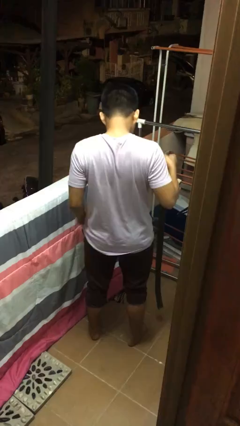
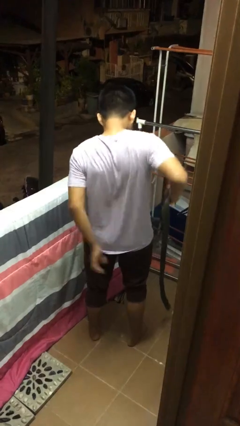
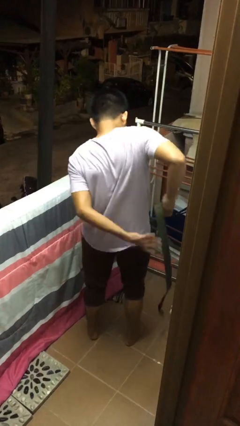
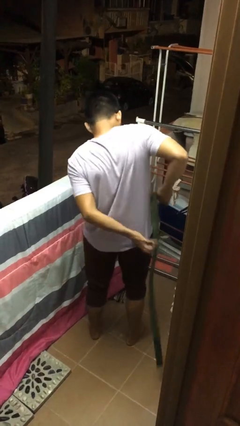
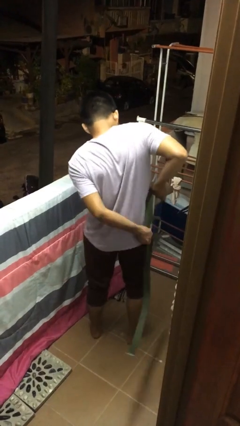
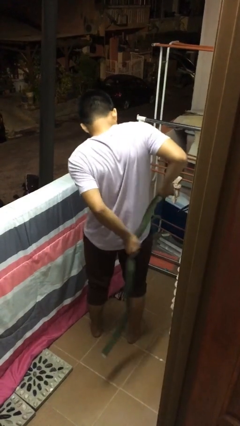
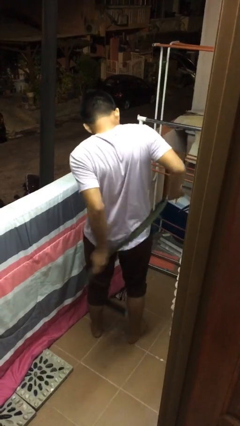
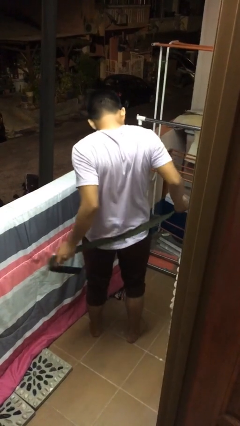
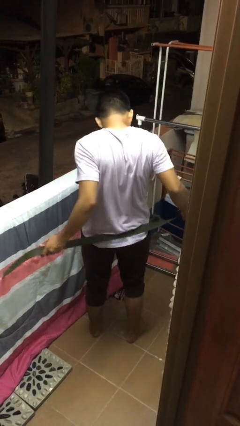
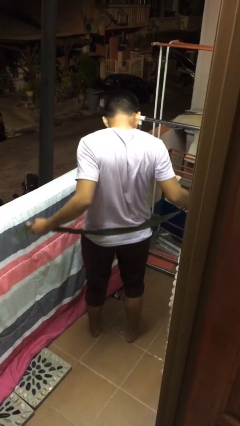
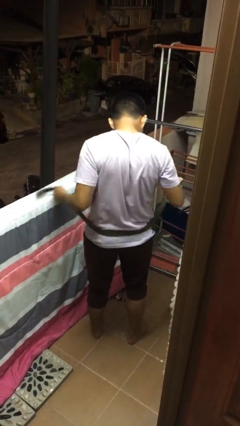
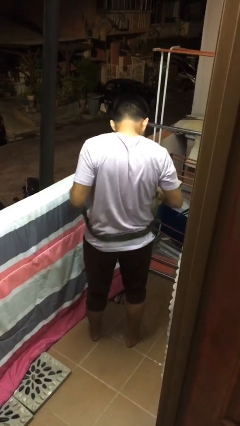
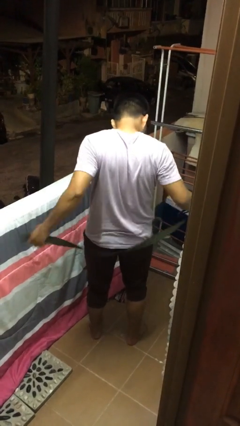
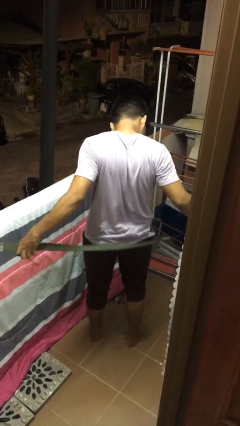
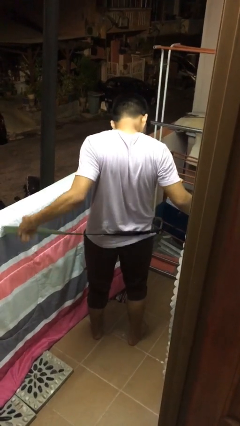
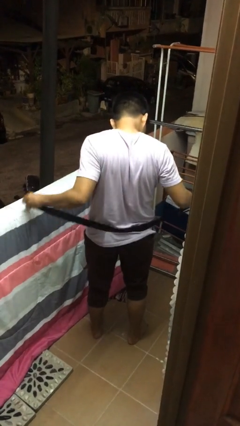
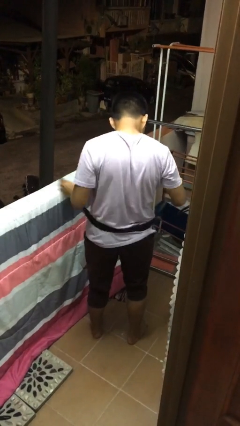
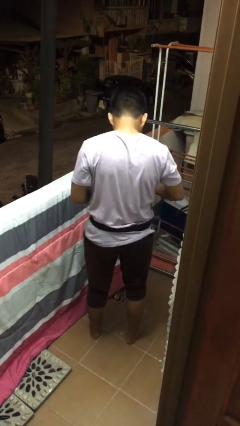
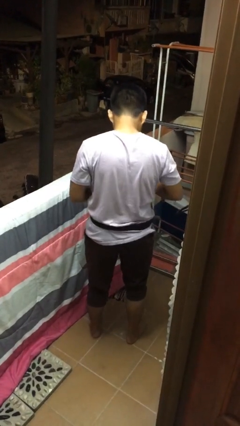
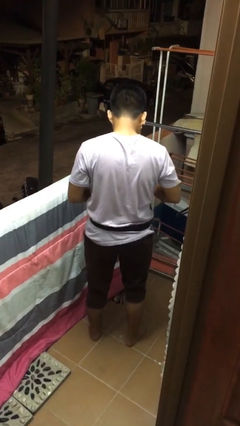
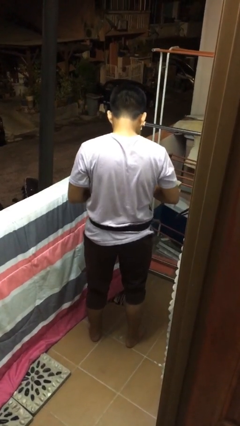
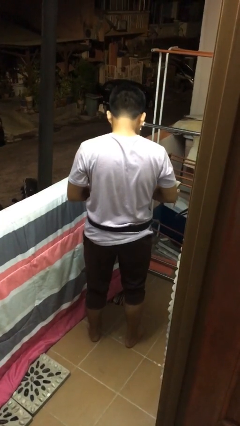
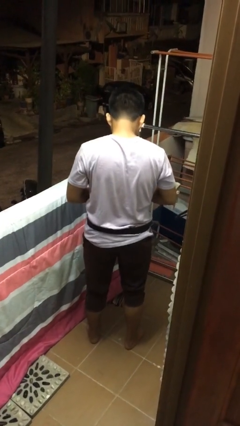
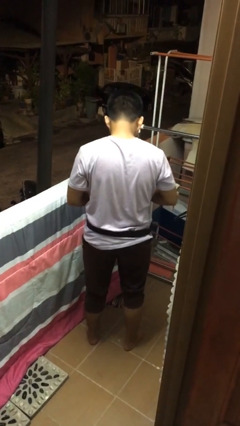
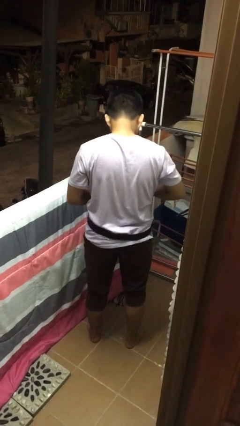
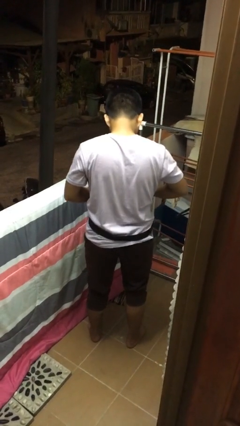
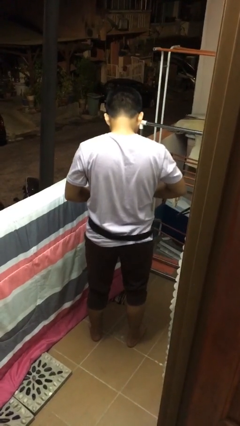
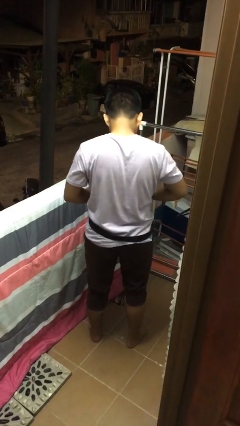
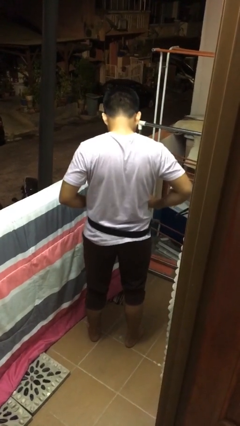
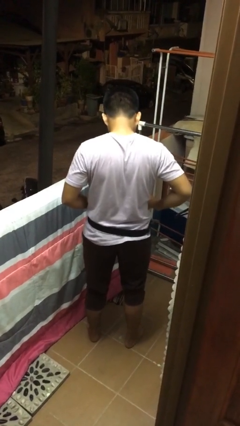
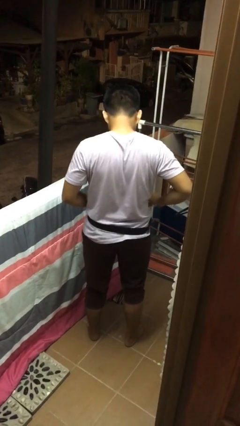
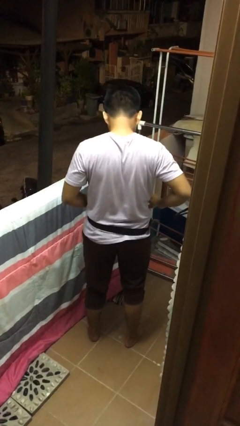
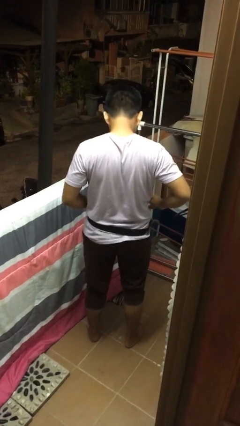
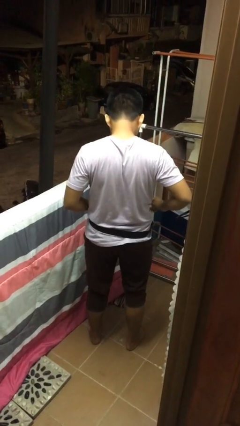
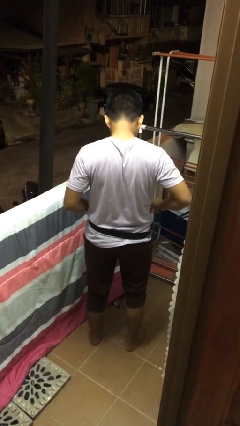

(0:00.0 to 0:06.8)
person puts on belt

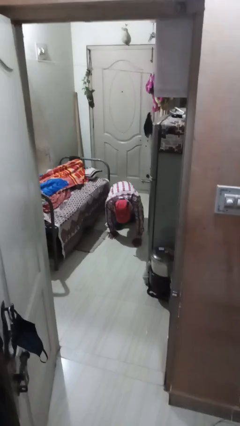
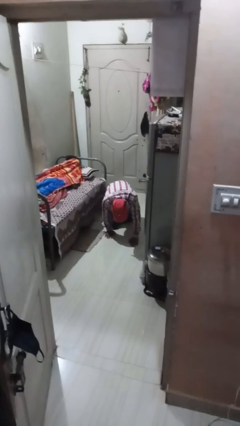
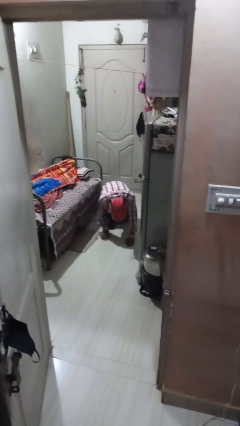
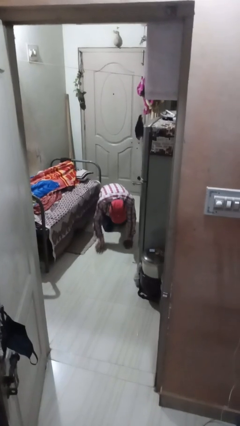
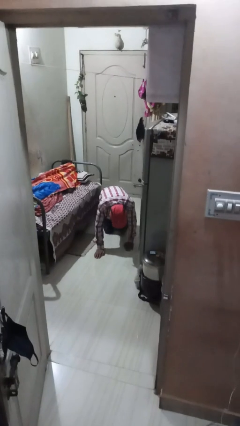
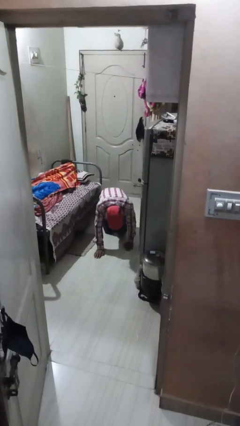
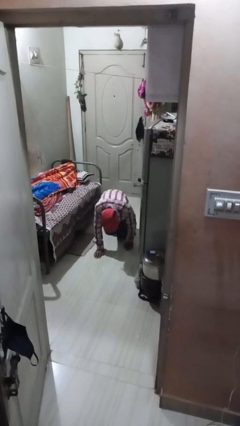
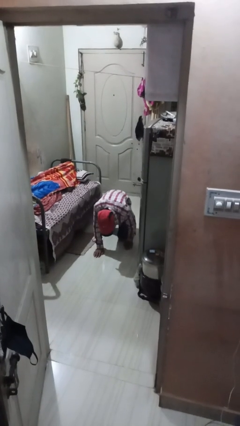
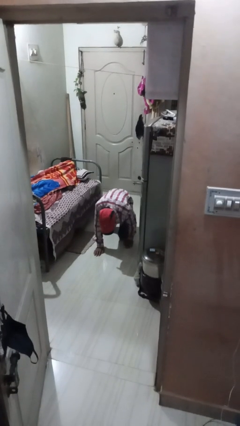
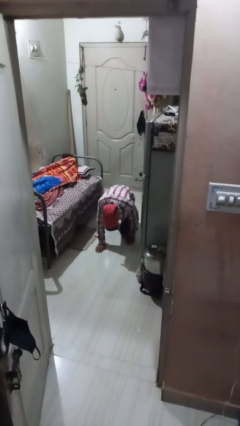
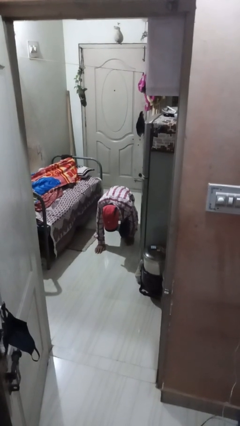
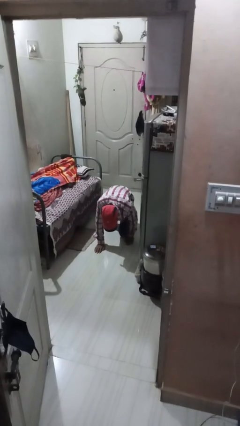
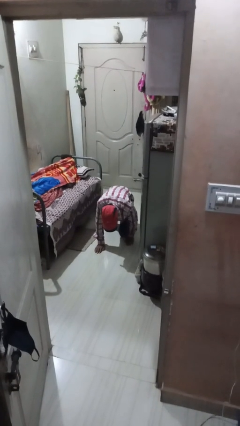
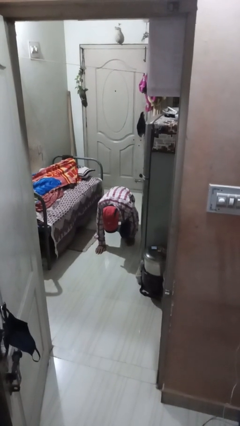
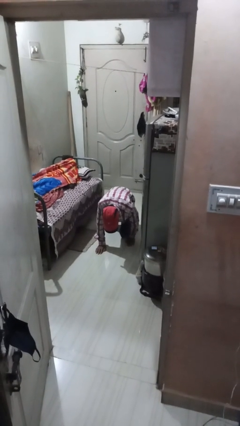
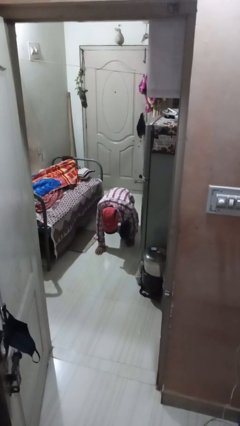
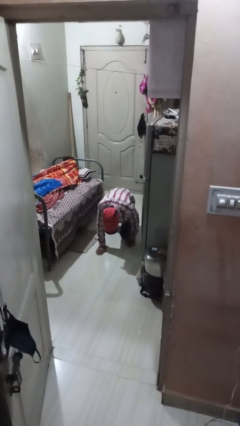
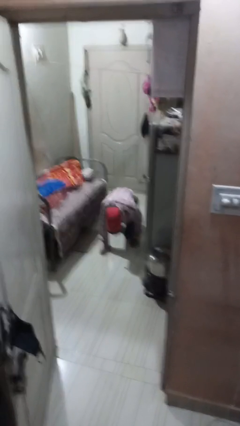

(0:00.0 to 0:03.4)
person crawls

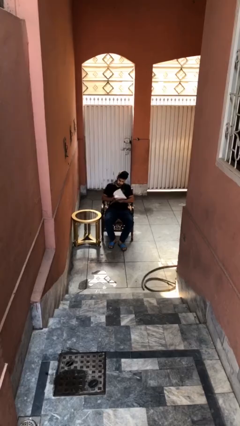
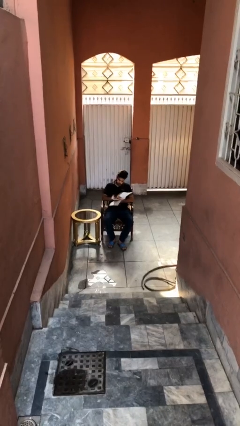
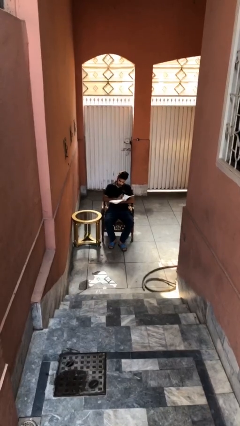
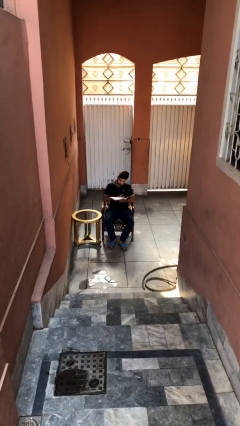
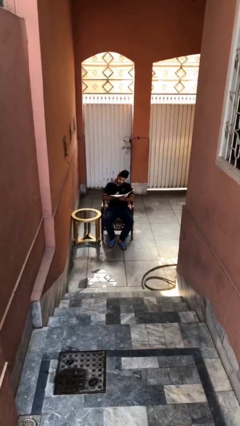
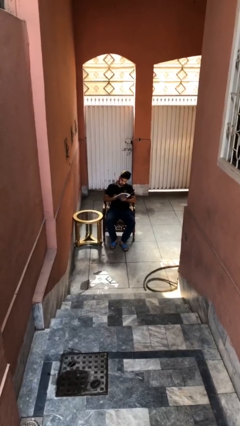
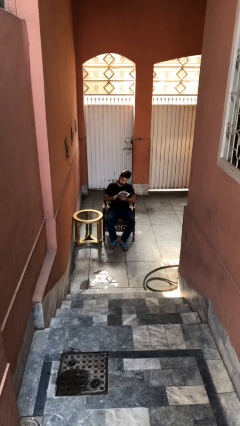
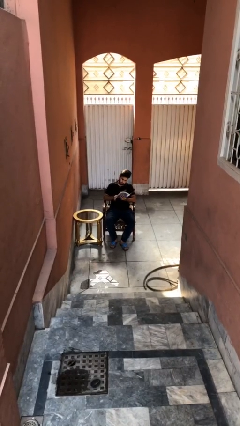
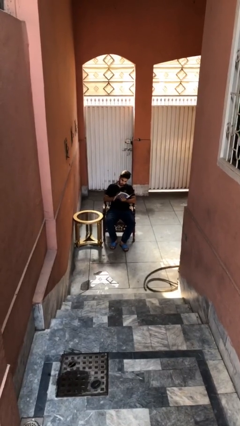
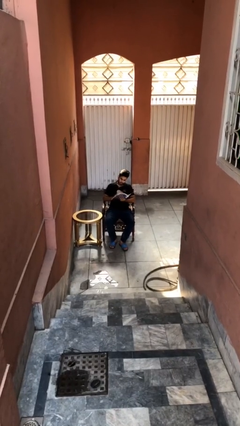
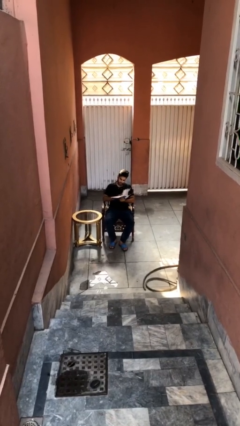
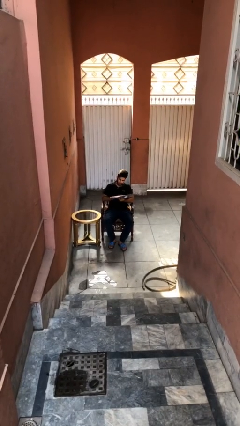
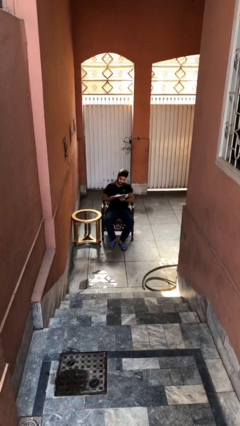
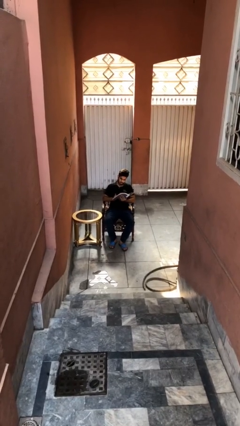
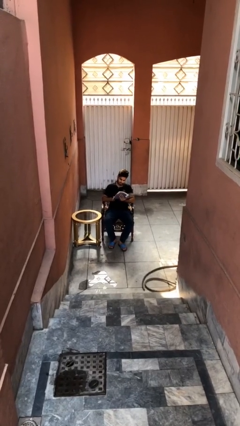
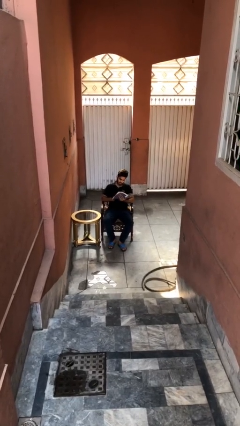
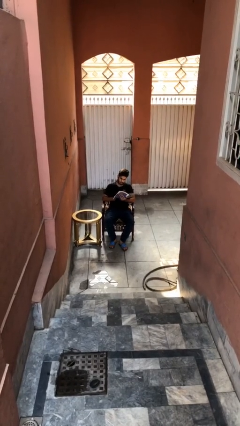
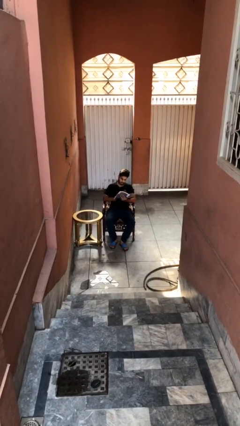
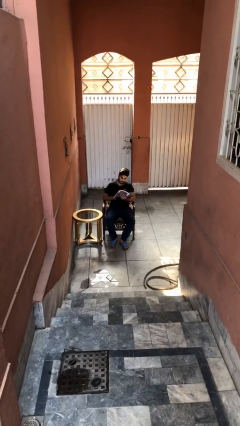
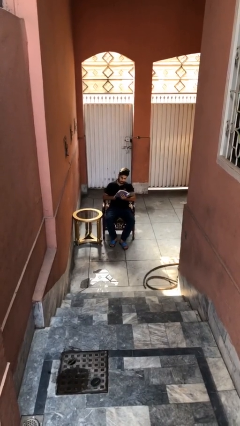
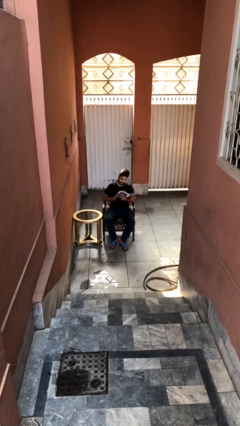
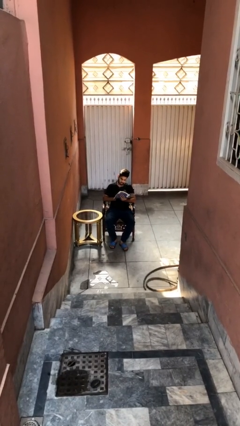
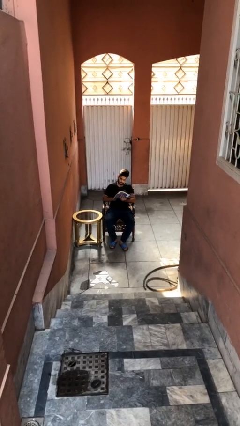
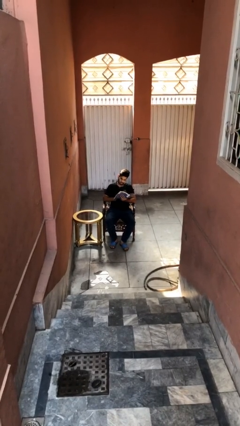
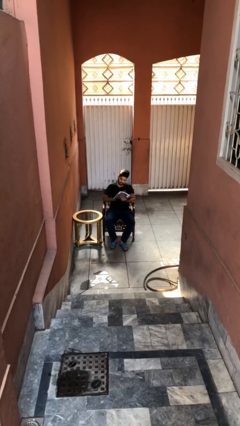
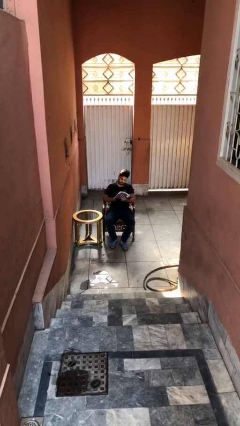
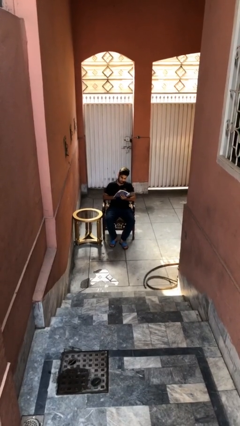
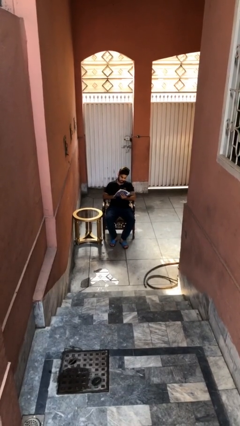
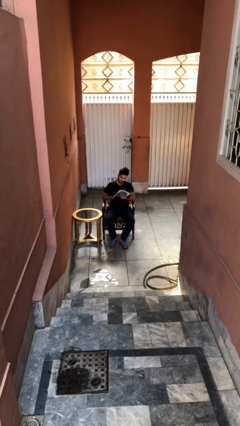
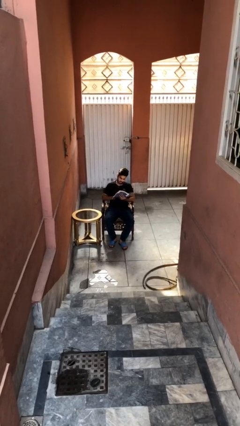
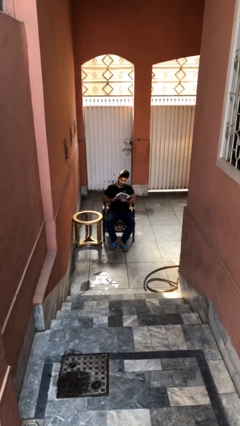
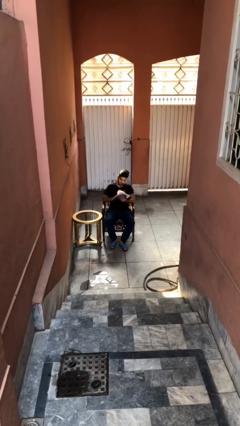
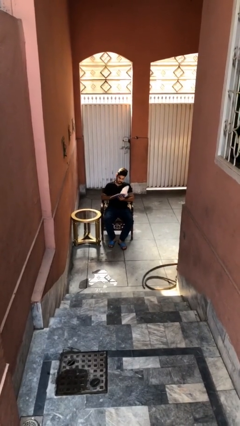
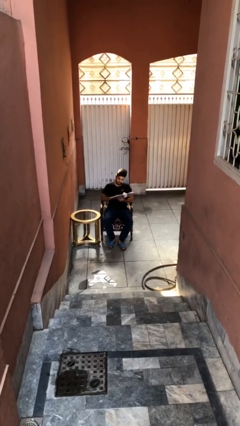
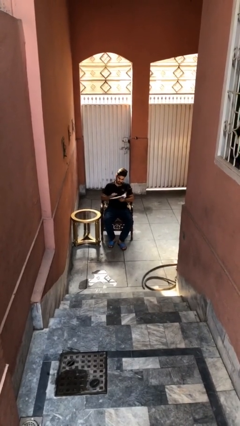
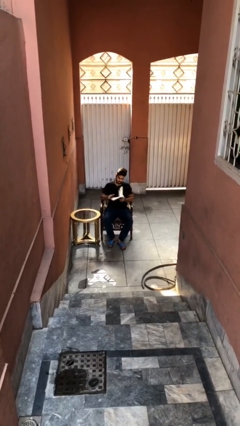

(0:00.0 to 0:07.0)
person reads document

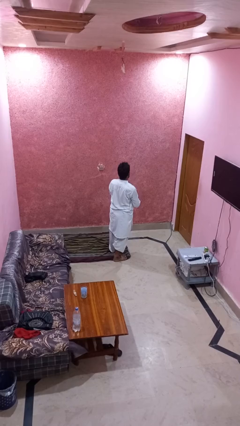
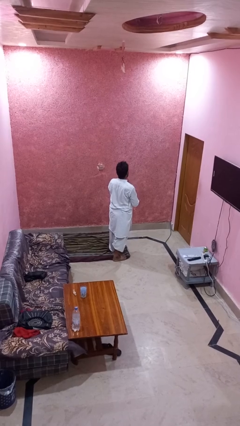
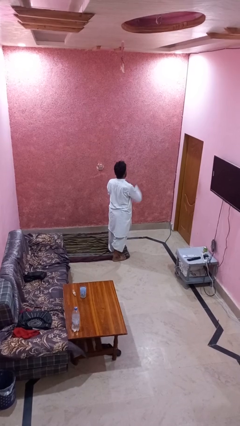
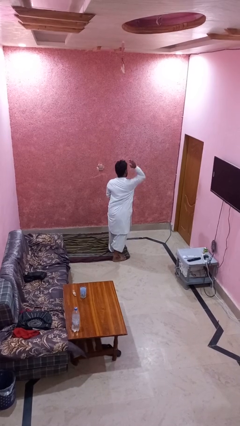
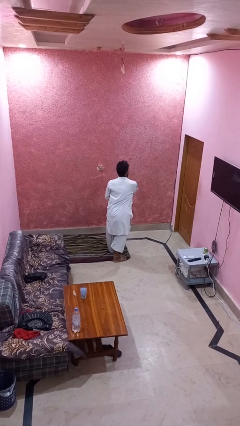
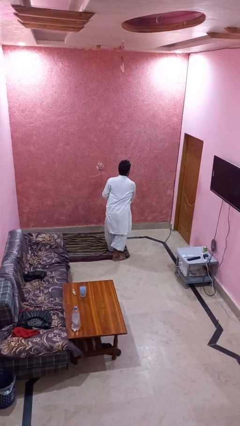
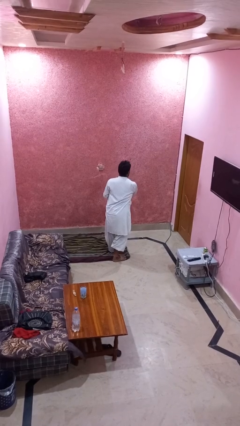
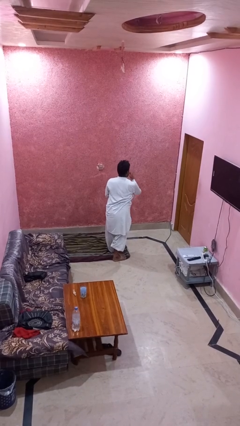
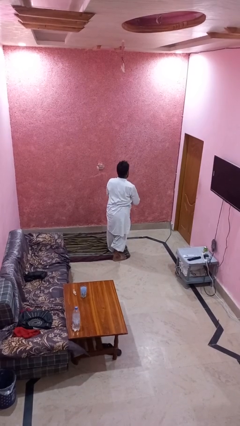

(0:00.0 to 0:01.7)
person karate chop
